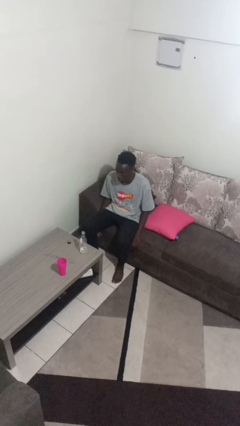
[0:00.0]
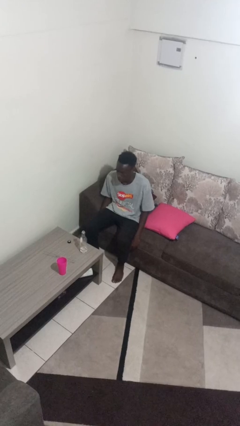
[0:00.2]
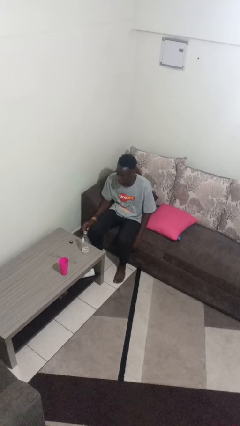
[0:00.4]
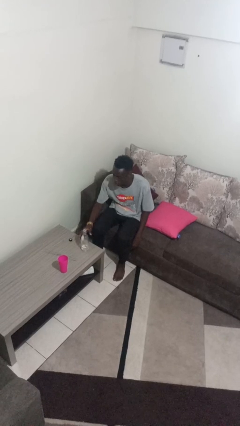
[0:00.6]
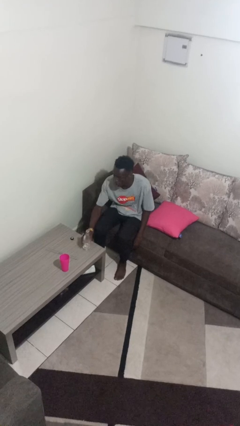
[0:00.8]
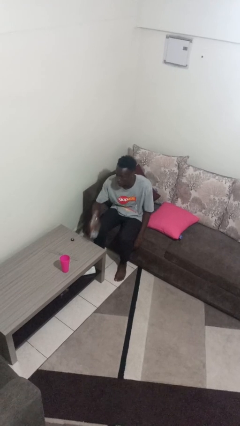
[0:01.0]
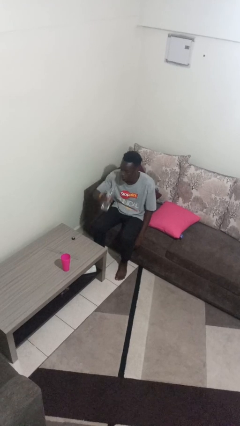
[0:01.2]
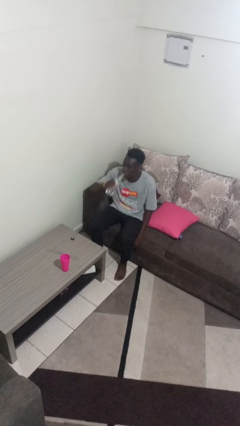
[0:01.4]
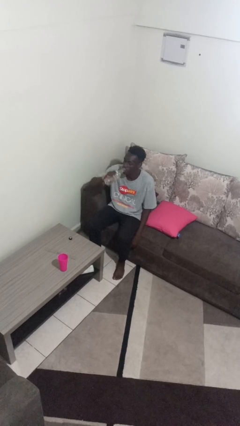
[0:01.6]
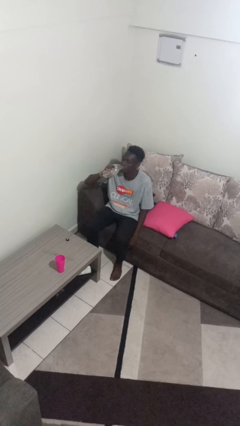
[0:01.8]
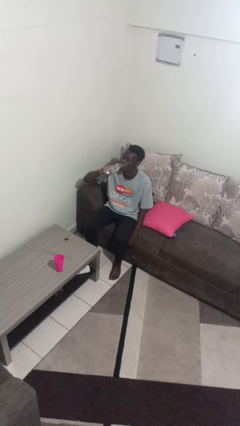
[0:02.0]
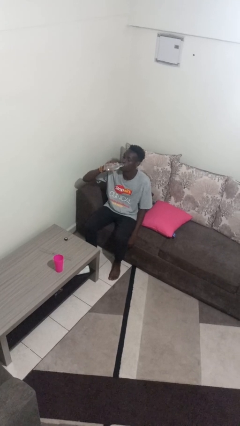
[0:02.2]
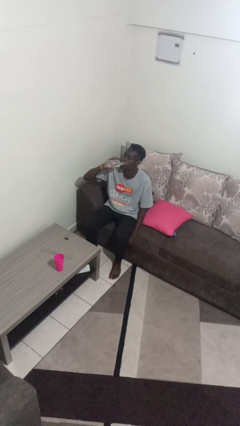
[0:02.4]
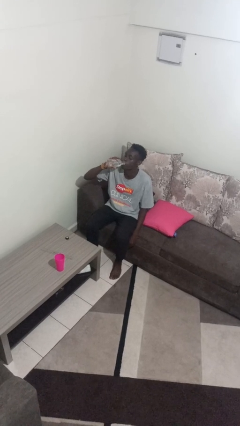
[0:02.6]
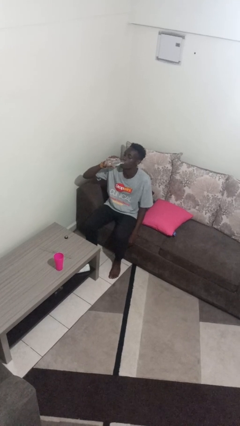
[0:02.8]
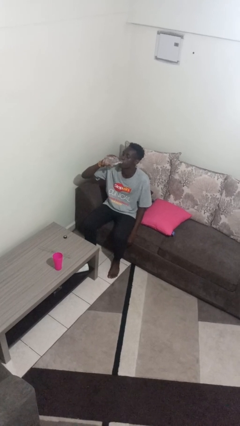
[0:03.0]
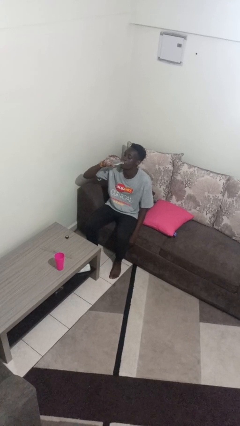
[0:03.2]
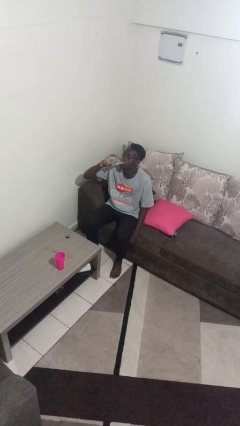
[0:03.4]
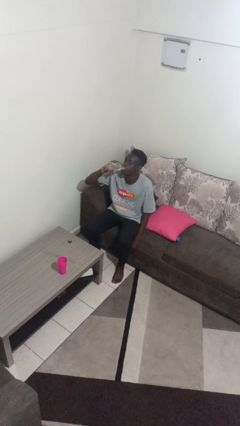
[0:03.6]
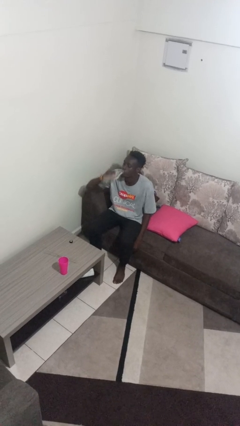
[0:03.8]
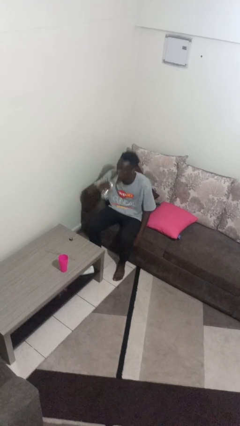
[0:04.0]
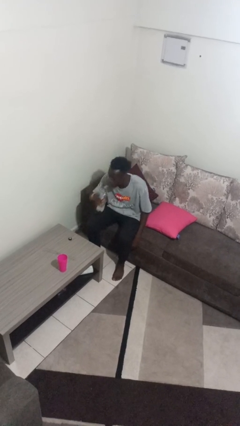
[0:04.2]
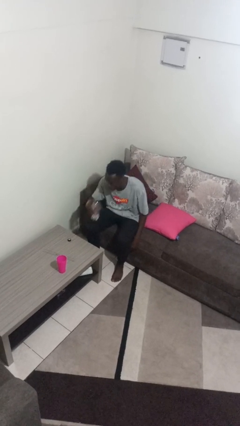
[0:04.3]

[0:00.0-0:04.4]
person drinks from bottle

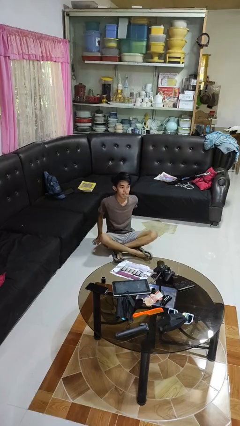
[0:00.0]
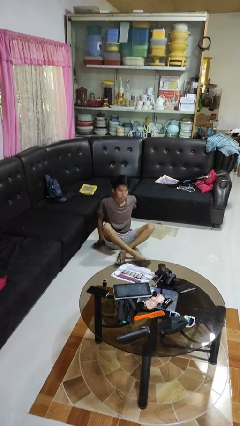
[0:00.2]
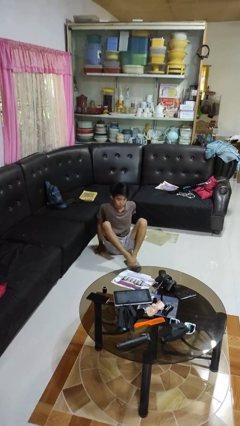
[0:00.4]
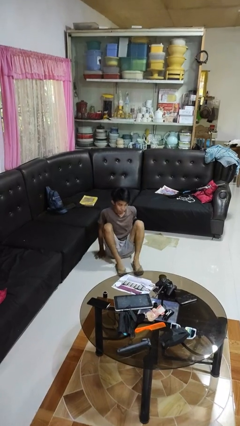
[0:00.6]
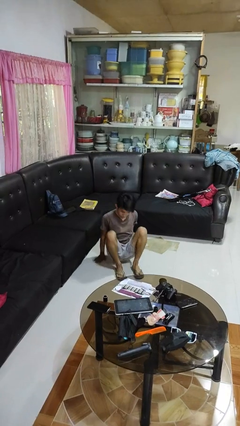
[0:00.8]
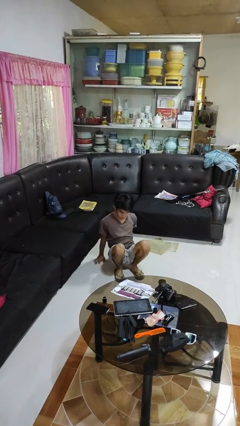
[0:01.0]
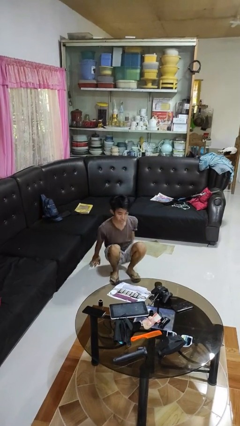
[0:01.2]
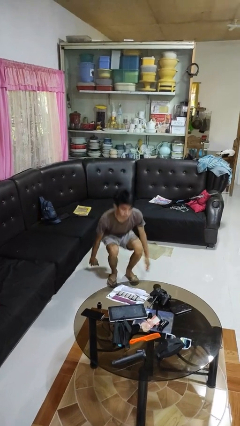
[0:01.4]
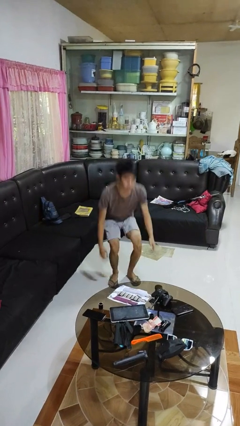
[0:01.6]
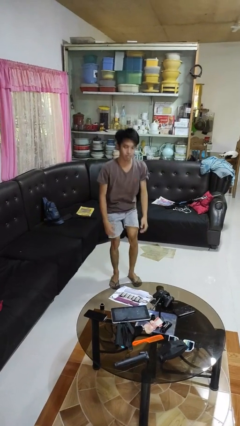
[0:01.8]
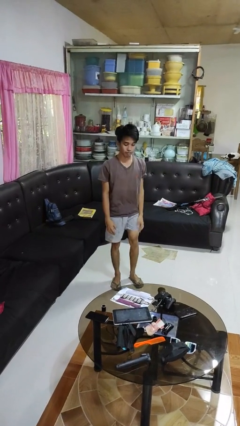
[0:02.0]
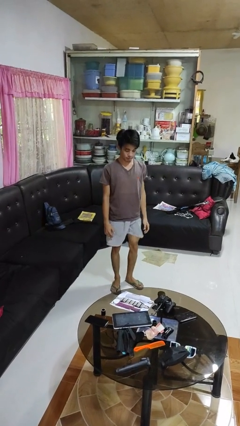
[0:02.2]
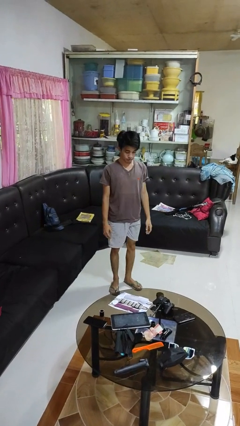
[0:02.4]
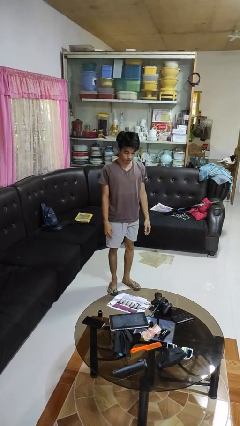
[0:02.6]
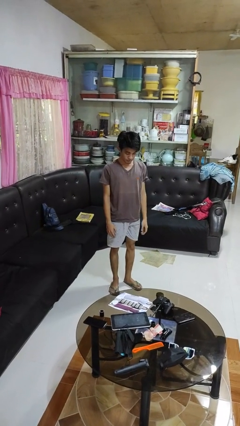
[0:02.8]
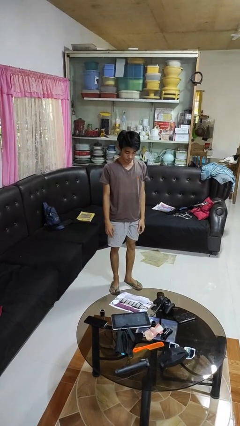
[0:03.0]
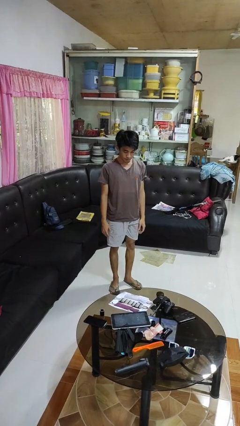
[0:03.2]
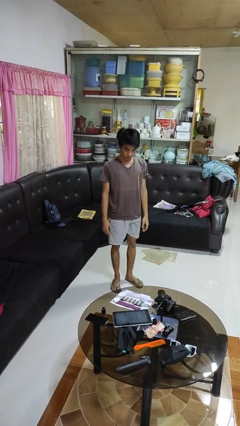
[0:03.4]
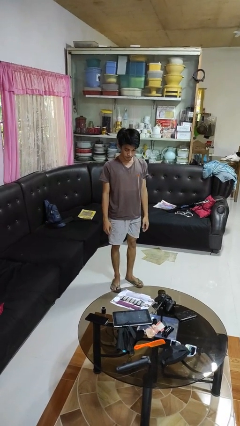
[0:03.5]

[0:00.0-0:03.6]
person stands up from floor

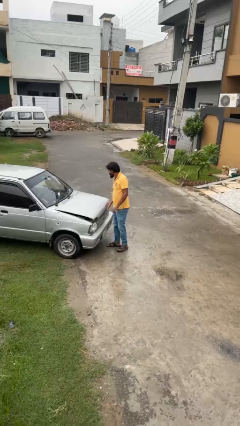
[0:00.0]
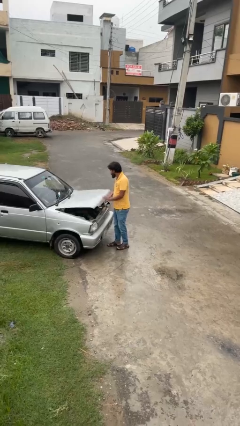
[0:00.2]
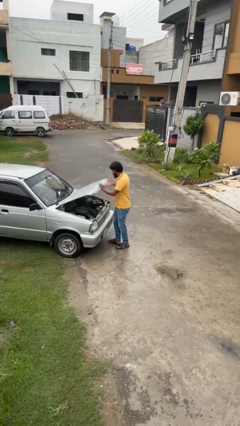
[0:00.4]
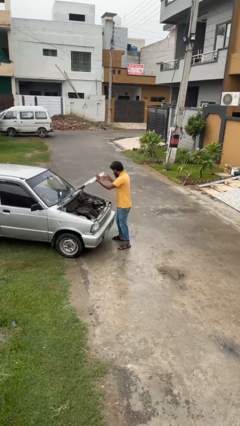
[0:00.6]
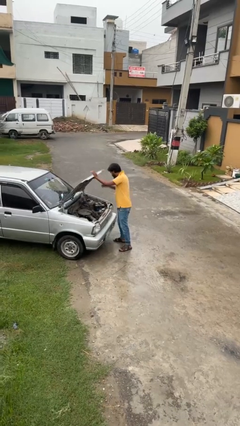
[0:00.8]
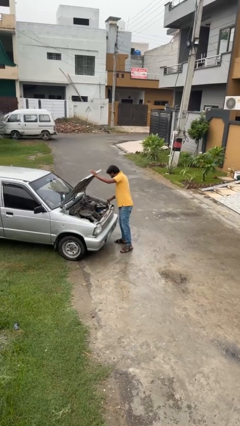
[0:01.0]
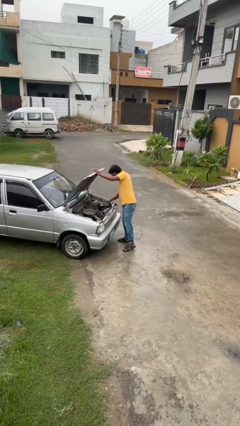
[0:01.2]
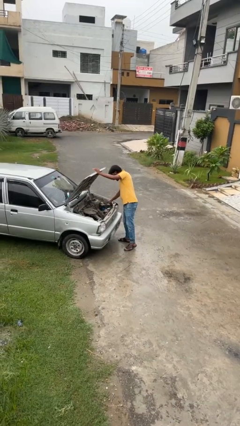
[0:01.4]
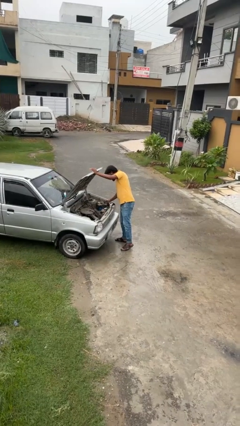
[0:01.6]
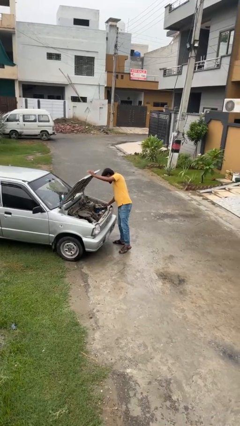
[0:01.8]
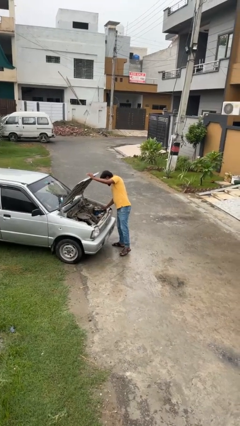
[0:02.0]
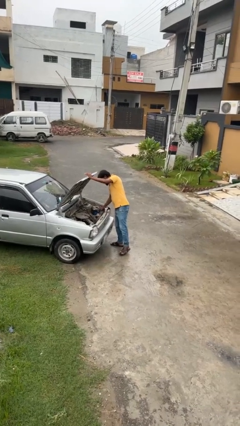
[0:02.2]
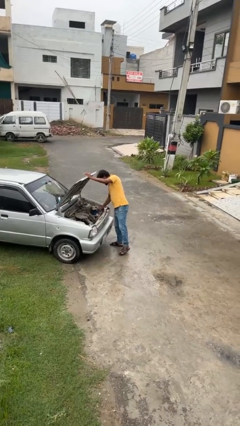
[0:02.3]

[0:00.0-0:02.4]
person opens car hood

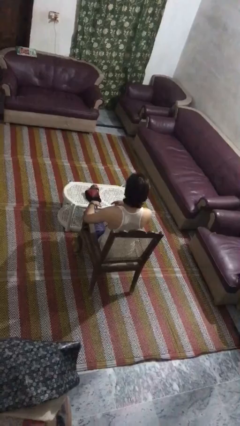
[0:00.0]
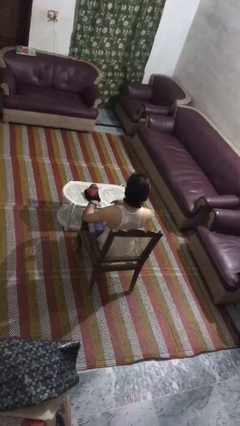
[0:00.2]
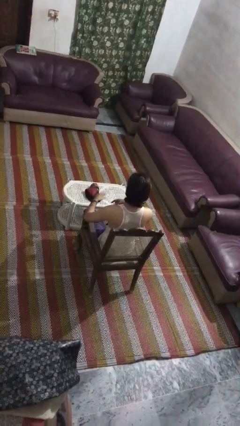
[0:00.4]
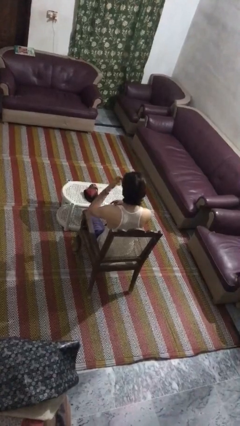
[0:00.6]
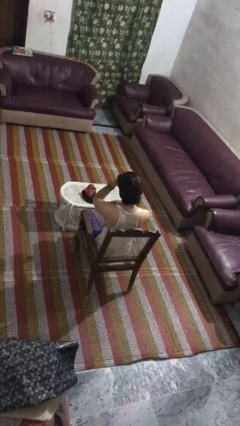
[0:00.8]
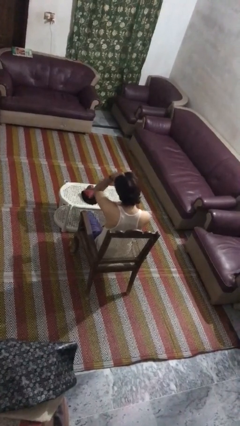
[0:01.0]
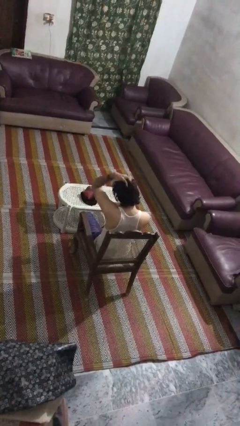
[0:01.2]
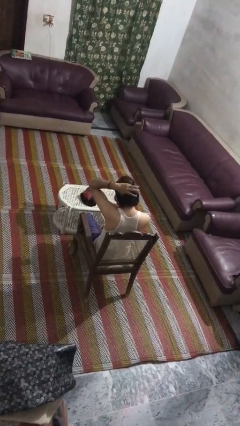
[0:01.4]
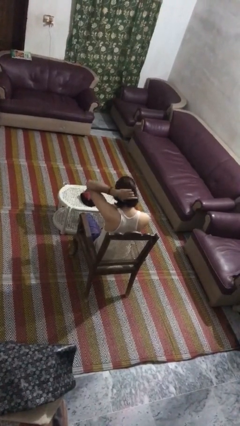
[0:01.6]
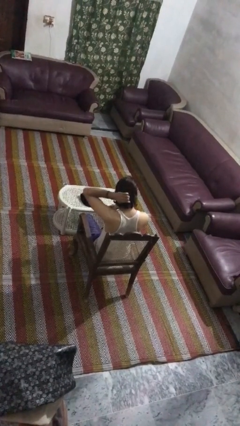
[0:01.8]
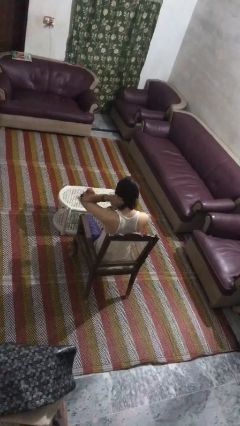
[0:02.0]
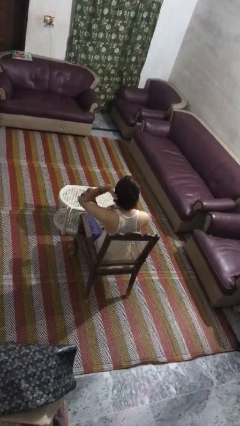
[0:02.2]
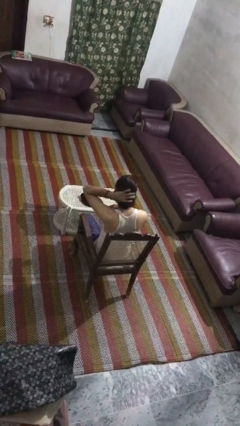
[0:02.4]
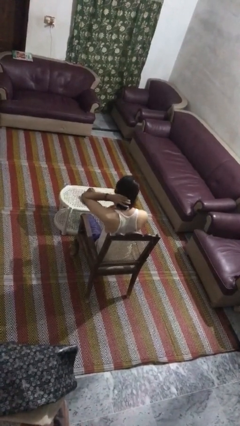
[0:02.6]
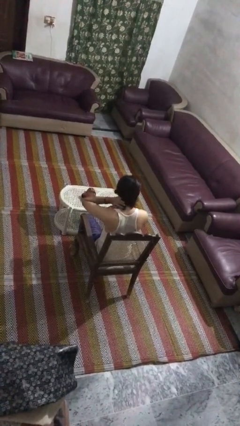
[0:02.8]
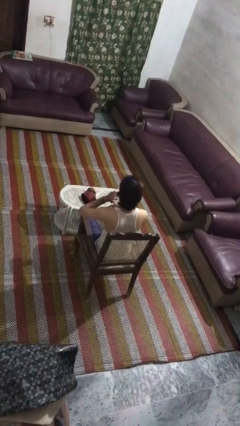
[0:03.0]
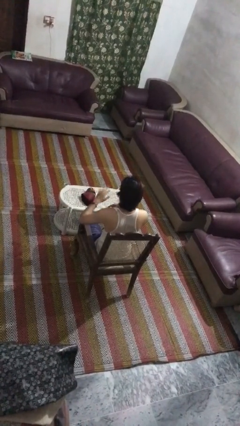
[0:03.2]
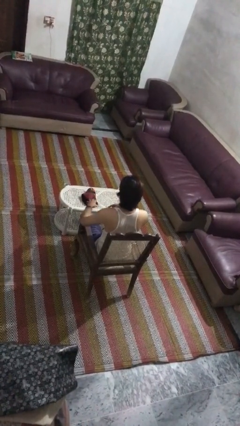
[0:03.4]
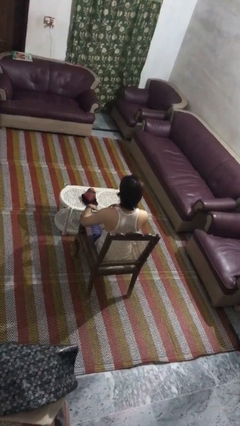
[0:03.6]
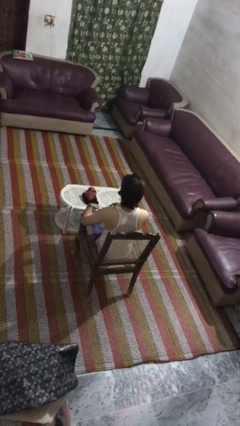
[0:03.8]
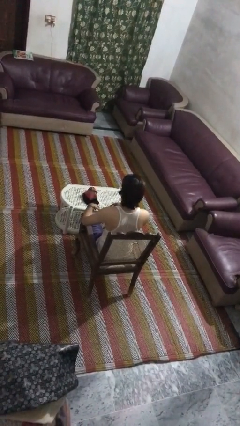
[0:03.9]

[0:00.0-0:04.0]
person strokes hair

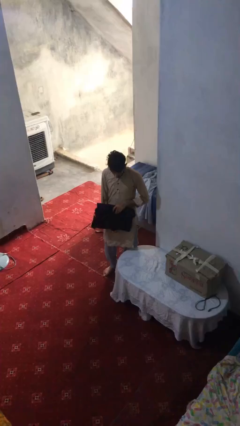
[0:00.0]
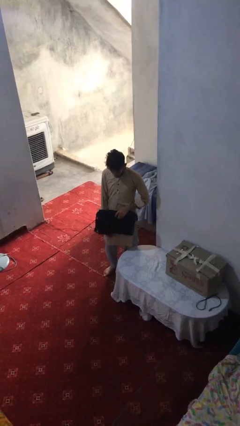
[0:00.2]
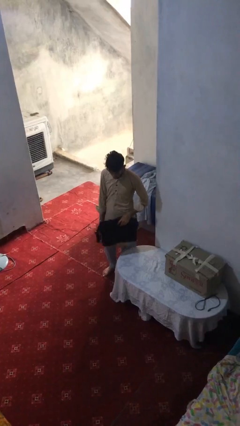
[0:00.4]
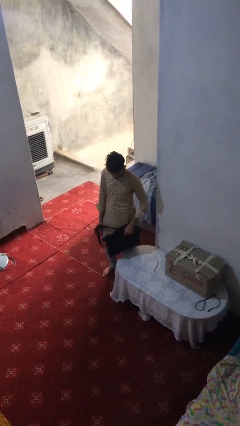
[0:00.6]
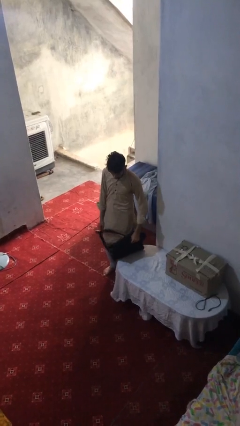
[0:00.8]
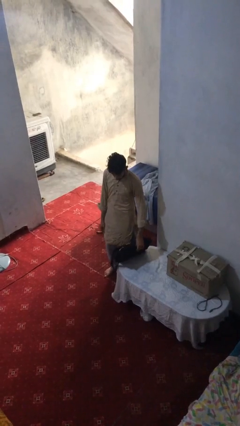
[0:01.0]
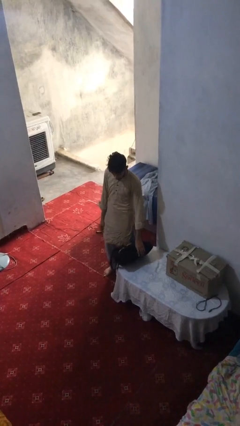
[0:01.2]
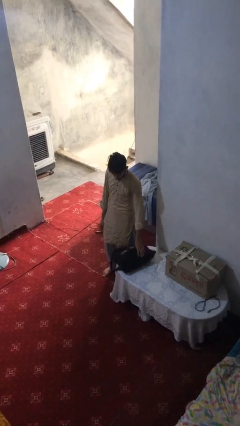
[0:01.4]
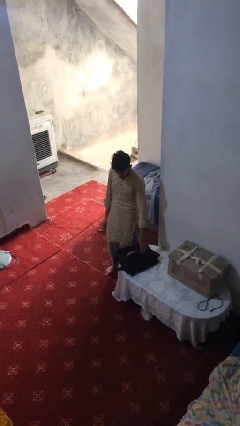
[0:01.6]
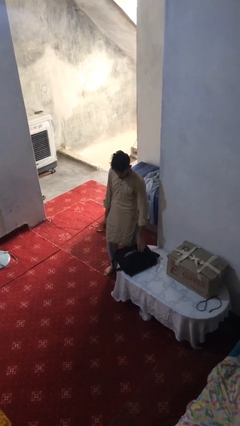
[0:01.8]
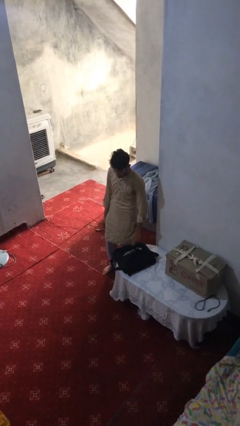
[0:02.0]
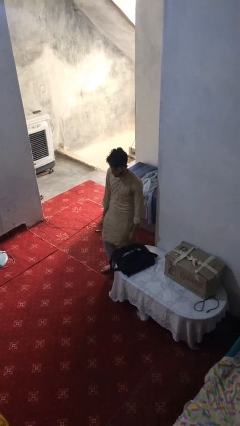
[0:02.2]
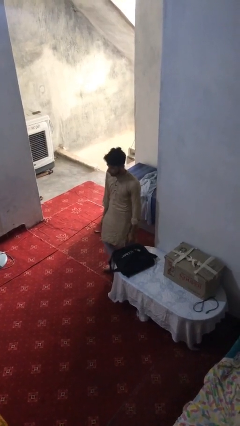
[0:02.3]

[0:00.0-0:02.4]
person puts down object on table

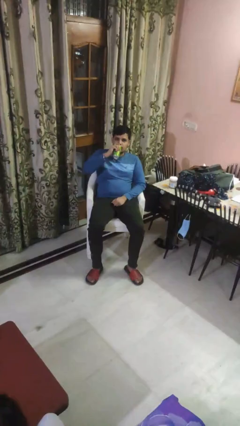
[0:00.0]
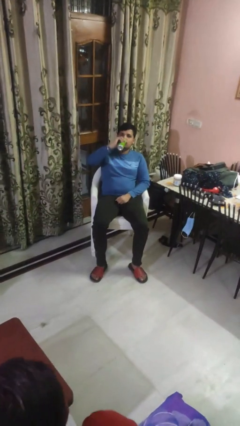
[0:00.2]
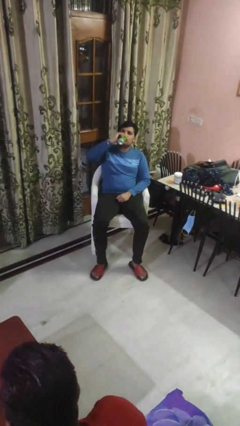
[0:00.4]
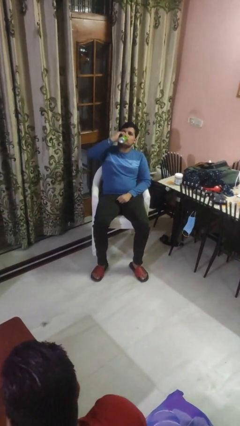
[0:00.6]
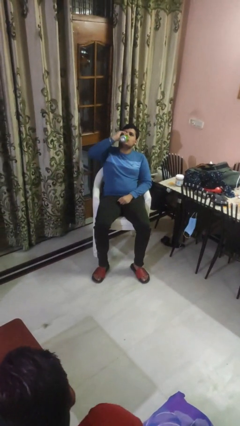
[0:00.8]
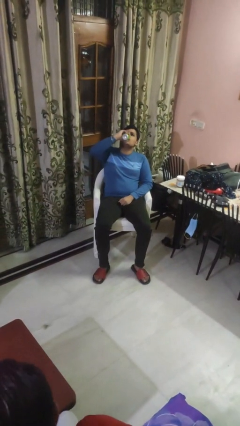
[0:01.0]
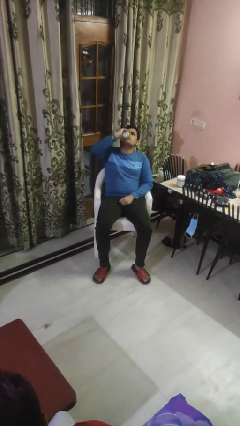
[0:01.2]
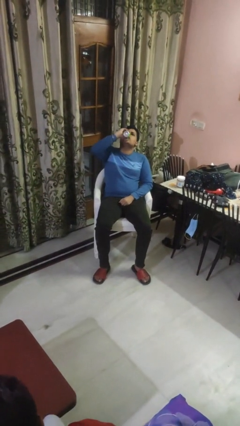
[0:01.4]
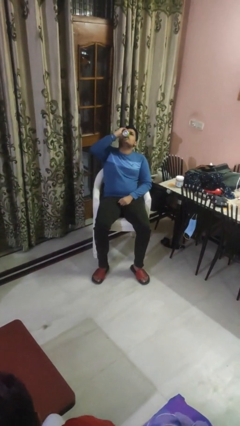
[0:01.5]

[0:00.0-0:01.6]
person drinks from beverage can
